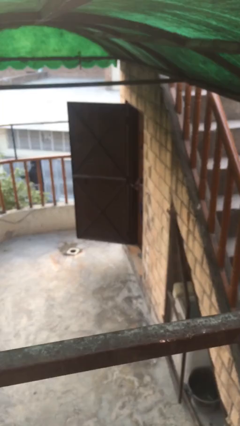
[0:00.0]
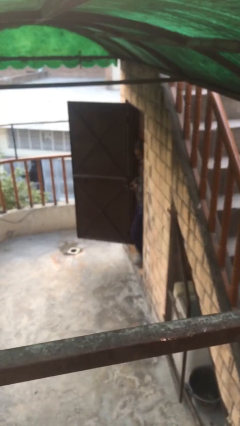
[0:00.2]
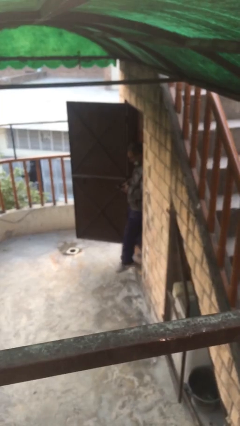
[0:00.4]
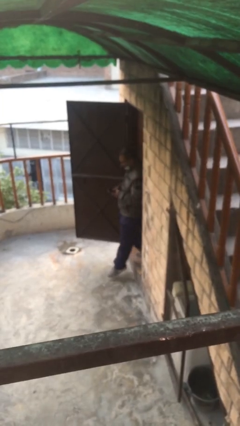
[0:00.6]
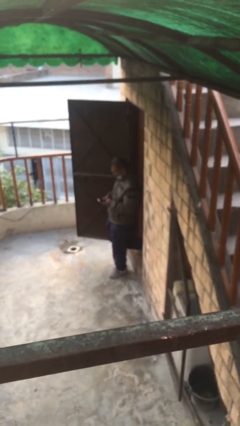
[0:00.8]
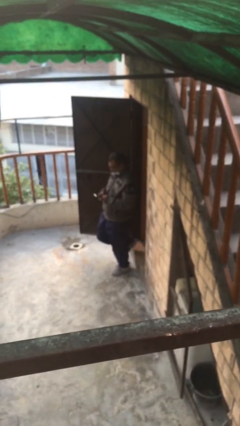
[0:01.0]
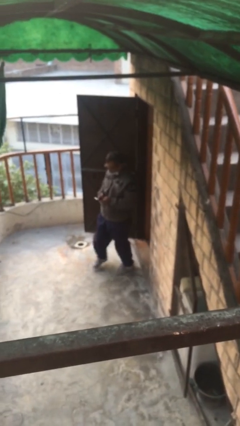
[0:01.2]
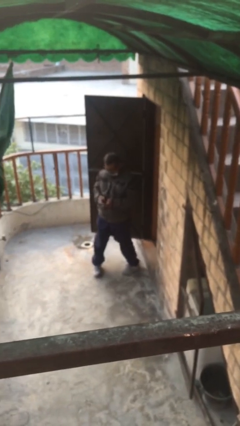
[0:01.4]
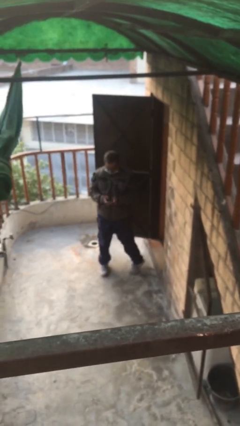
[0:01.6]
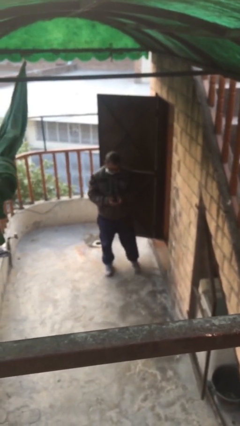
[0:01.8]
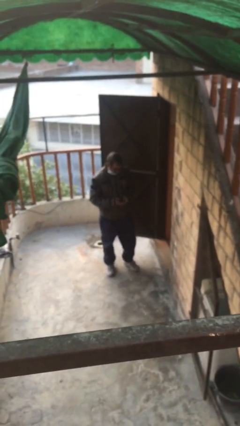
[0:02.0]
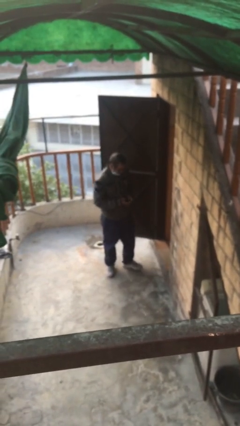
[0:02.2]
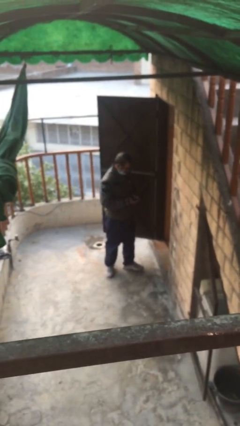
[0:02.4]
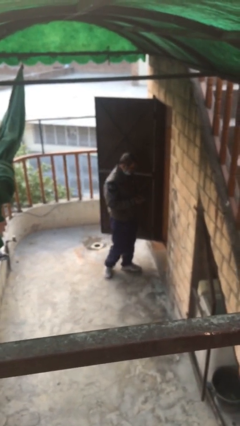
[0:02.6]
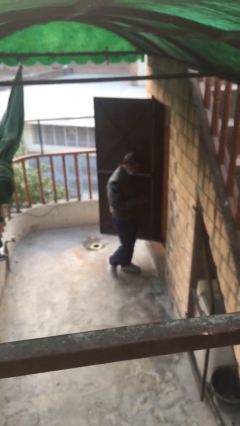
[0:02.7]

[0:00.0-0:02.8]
person enters scene through structure

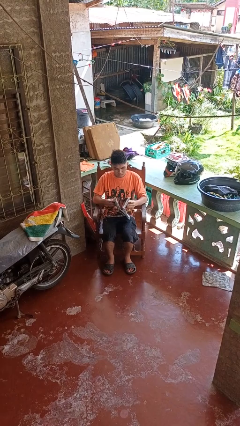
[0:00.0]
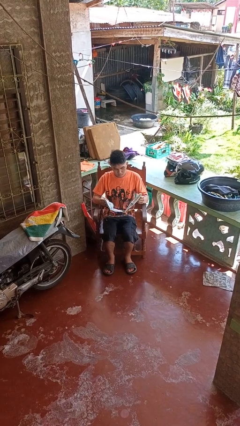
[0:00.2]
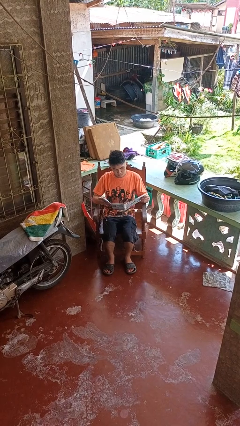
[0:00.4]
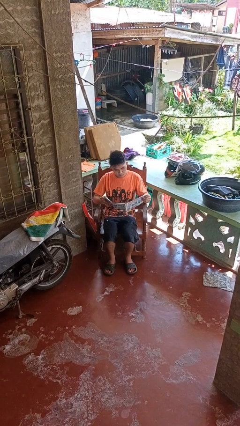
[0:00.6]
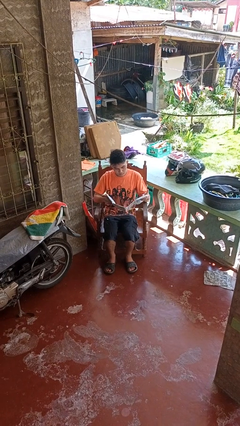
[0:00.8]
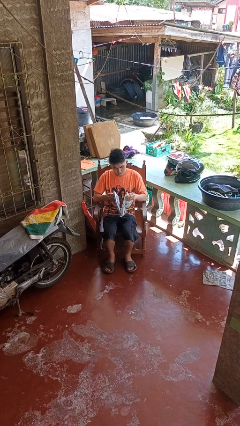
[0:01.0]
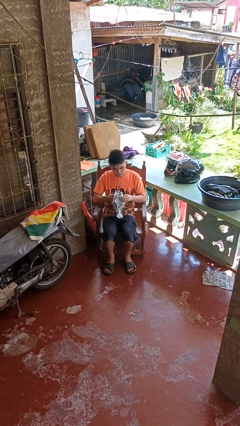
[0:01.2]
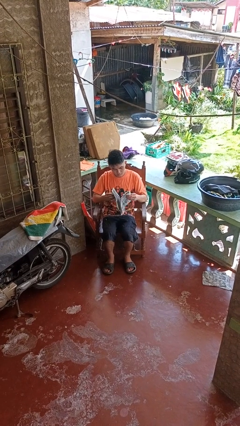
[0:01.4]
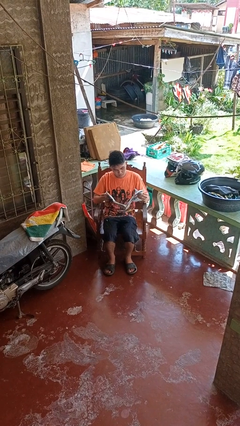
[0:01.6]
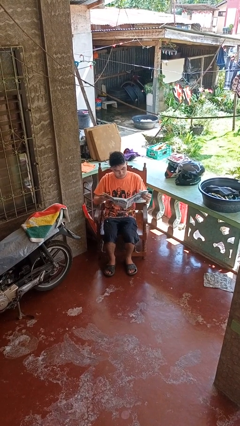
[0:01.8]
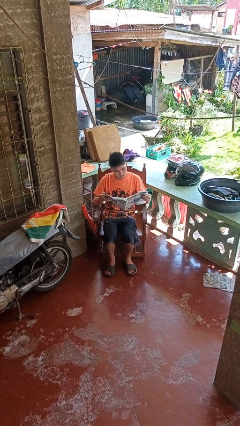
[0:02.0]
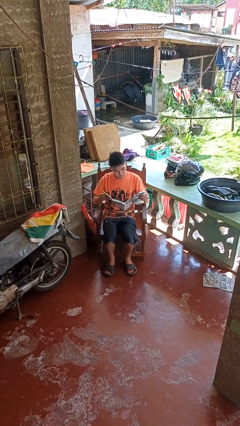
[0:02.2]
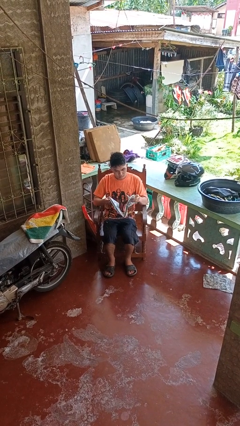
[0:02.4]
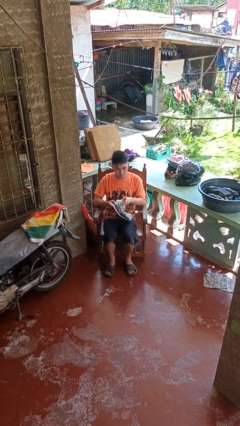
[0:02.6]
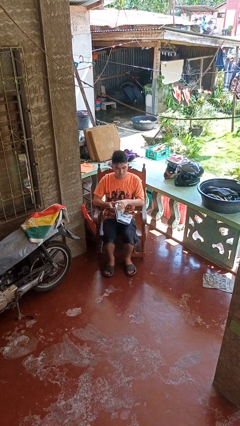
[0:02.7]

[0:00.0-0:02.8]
person reads newspaper

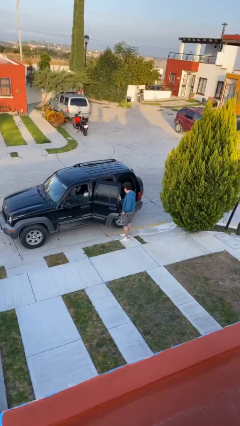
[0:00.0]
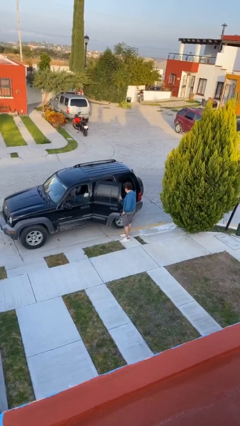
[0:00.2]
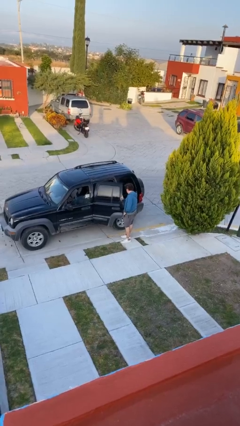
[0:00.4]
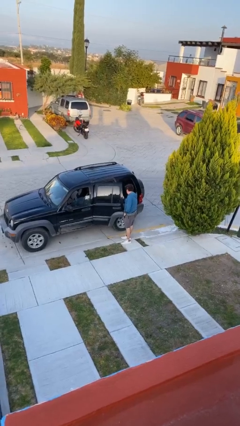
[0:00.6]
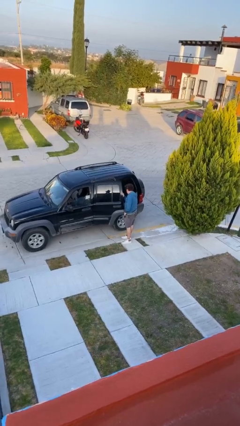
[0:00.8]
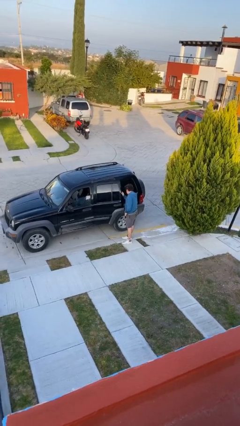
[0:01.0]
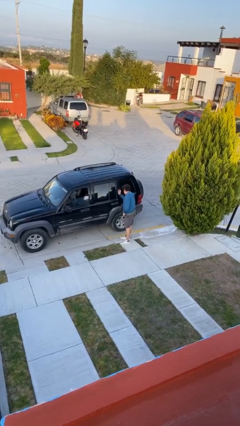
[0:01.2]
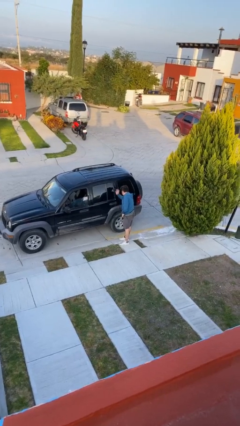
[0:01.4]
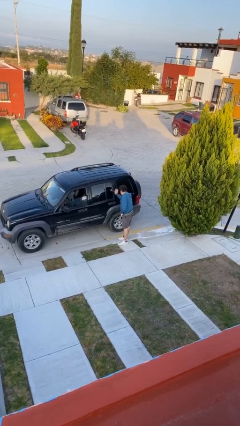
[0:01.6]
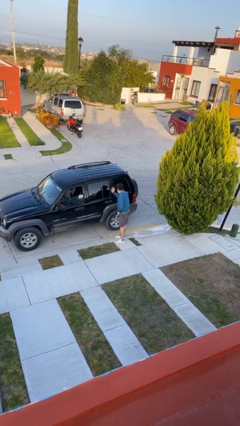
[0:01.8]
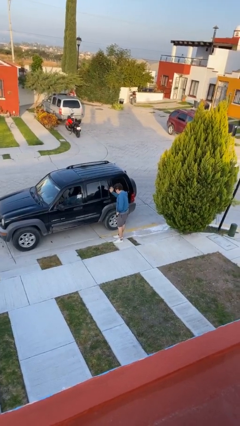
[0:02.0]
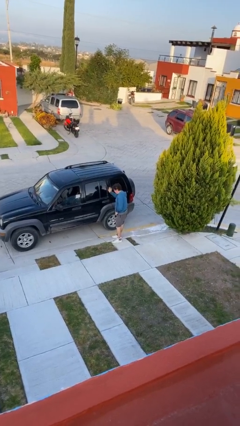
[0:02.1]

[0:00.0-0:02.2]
person closes car door

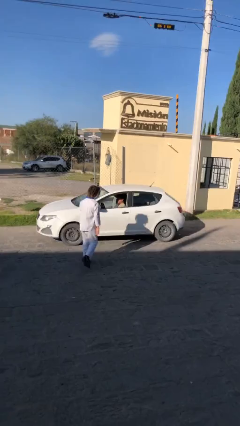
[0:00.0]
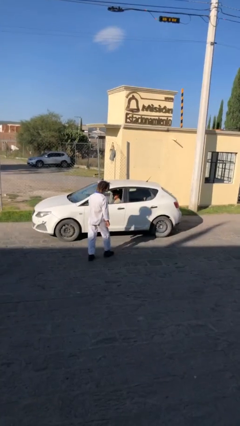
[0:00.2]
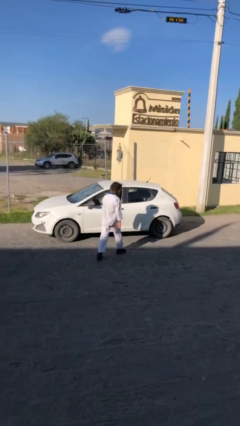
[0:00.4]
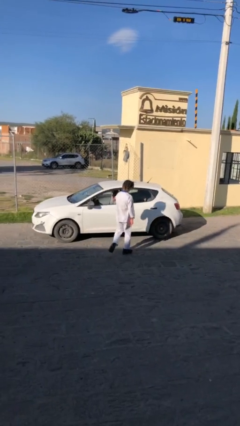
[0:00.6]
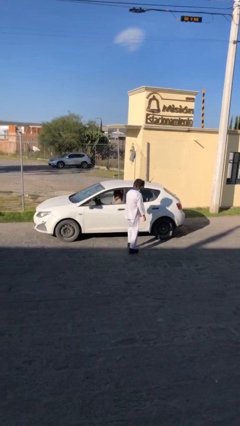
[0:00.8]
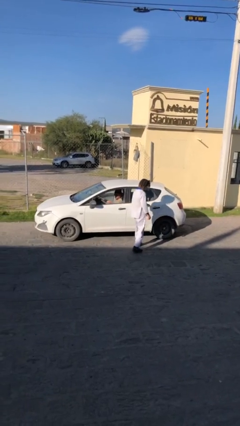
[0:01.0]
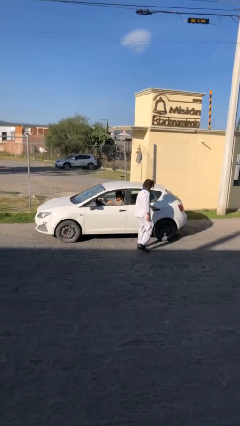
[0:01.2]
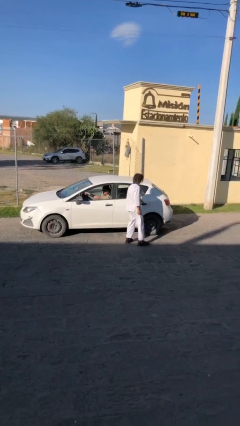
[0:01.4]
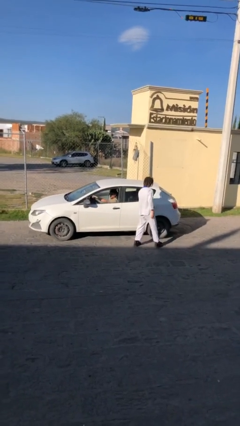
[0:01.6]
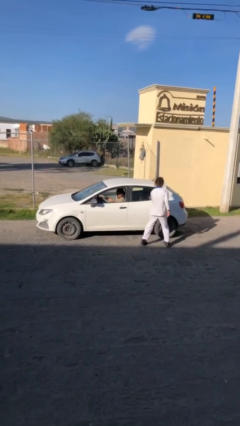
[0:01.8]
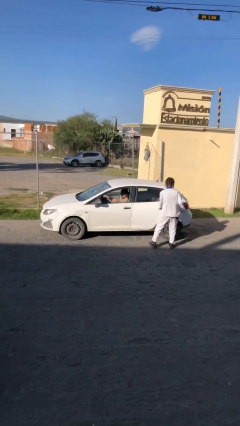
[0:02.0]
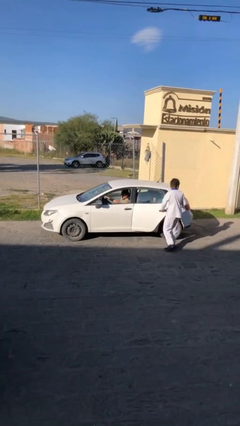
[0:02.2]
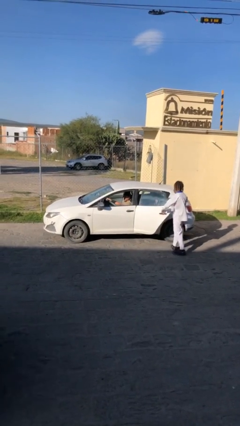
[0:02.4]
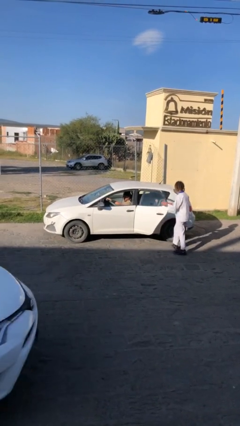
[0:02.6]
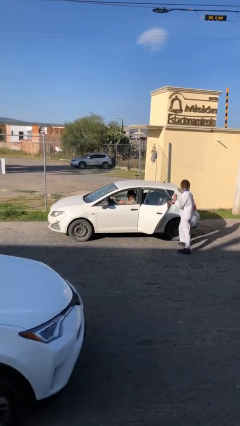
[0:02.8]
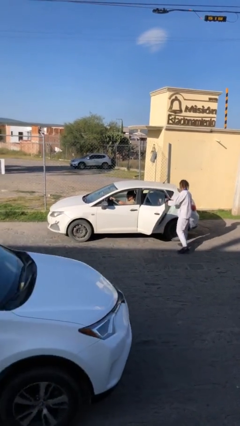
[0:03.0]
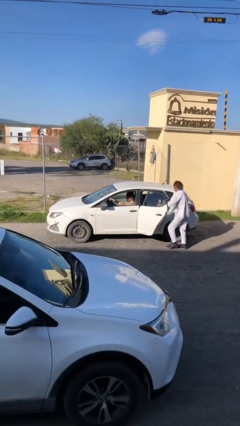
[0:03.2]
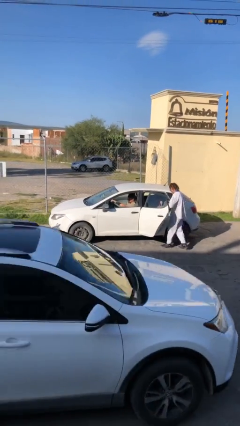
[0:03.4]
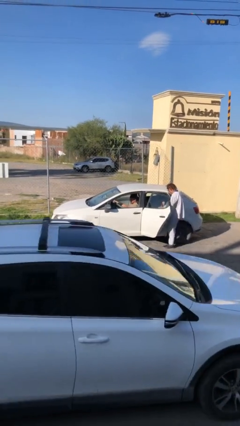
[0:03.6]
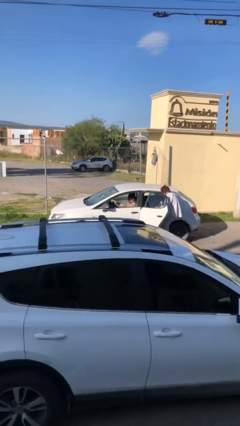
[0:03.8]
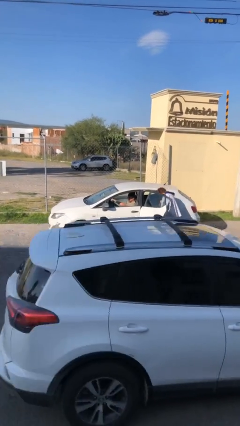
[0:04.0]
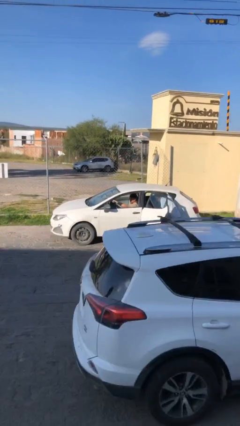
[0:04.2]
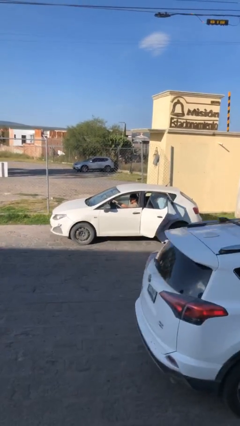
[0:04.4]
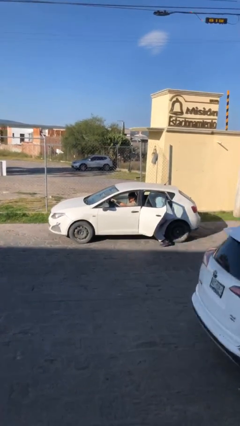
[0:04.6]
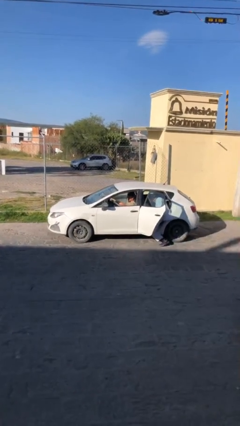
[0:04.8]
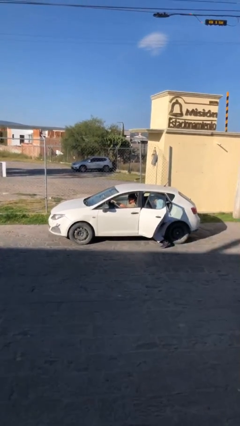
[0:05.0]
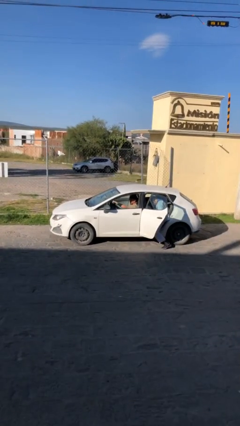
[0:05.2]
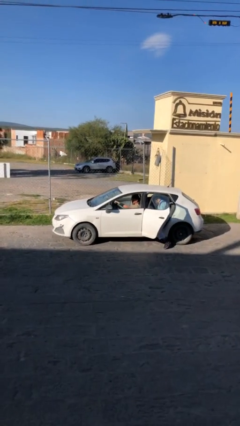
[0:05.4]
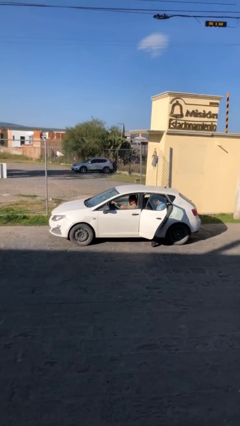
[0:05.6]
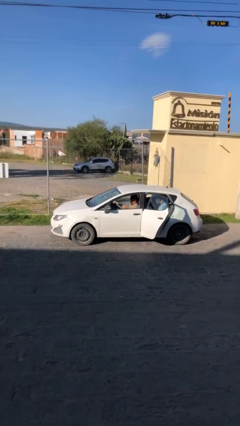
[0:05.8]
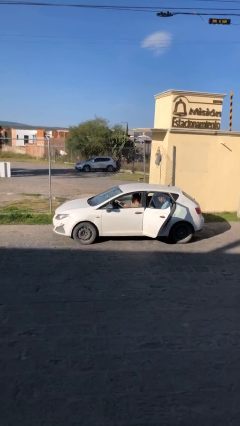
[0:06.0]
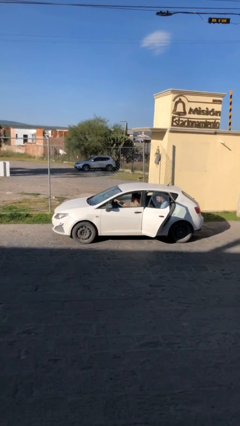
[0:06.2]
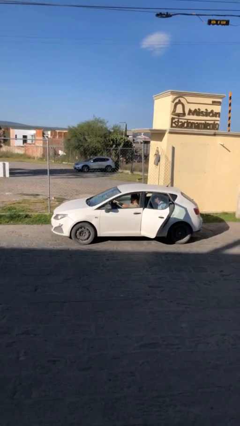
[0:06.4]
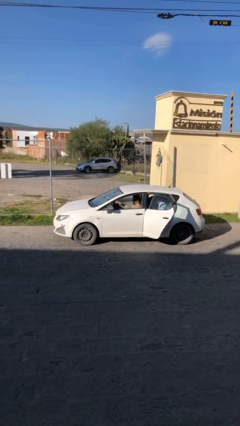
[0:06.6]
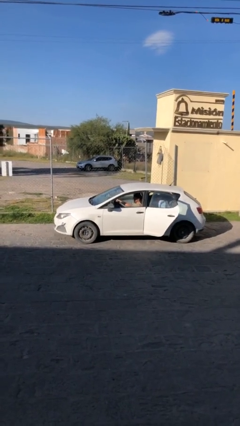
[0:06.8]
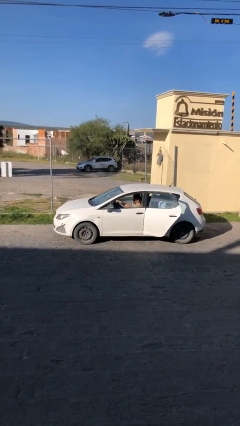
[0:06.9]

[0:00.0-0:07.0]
car picks up person

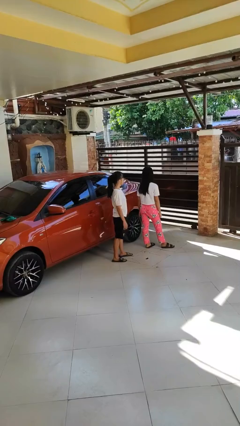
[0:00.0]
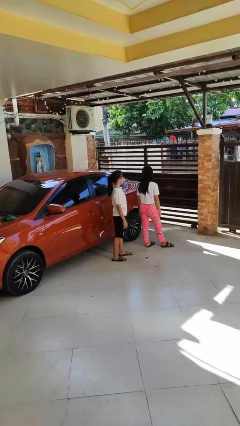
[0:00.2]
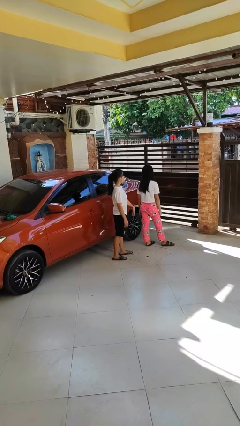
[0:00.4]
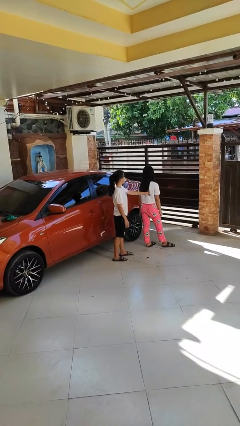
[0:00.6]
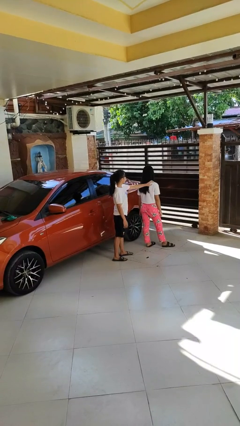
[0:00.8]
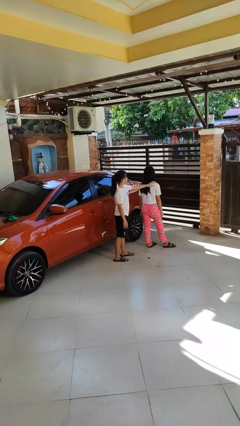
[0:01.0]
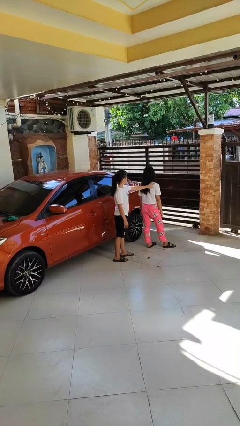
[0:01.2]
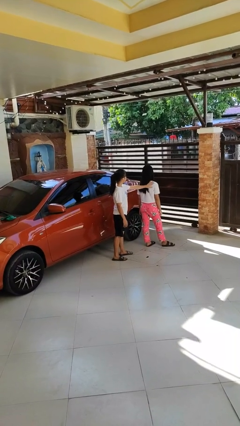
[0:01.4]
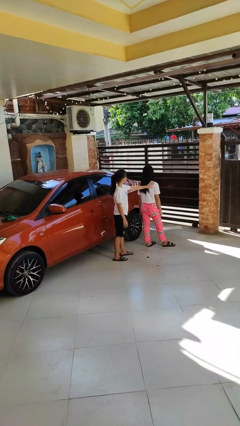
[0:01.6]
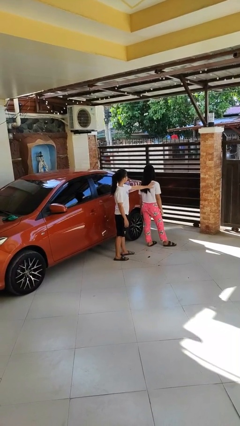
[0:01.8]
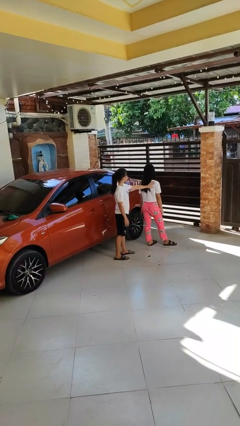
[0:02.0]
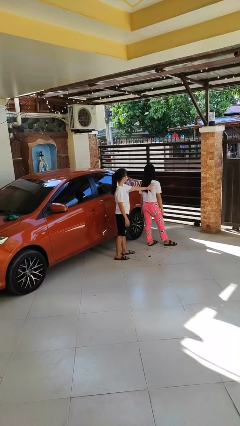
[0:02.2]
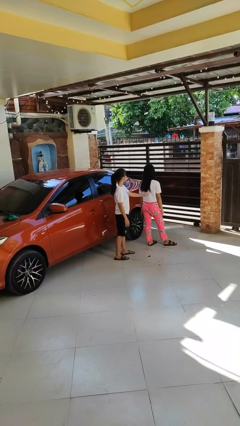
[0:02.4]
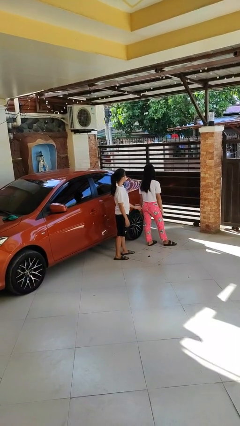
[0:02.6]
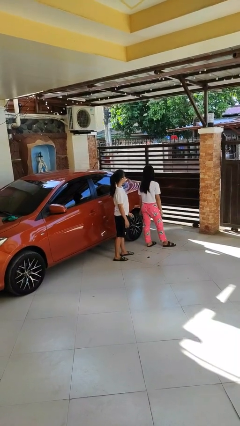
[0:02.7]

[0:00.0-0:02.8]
person touches back of person
